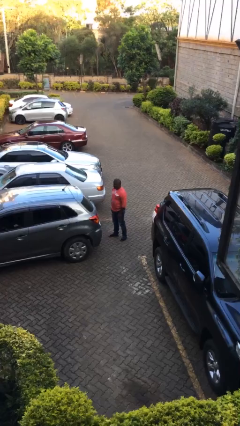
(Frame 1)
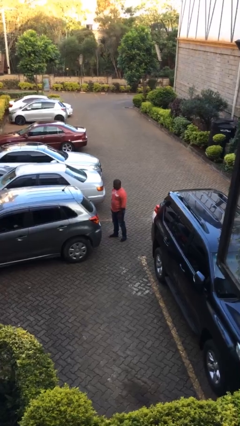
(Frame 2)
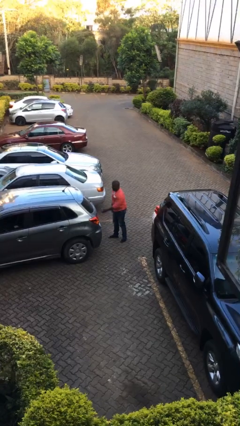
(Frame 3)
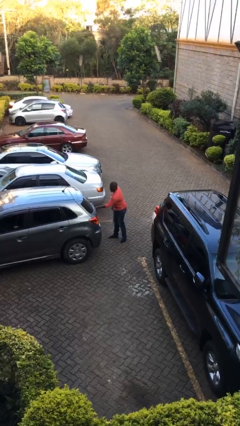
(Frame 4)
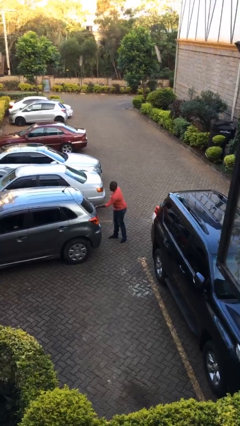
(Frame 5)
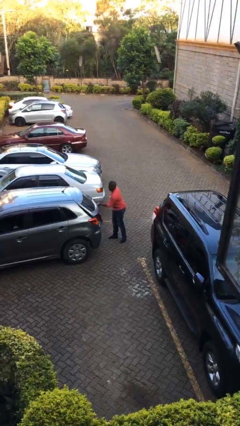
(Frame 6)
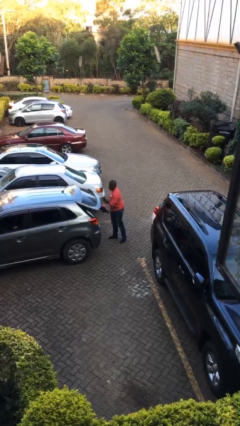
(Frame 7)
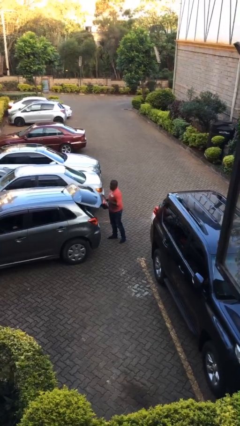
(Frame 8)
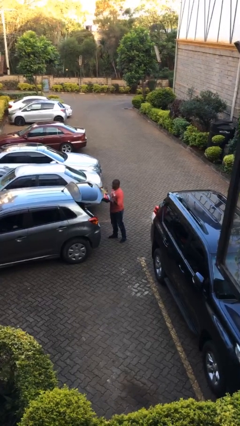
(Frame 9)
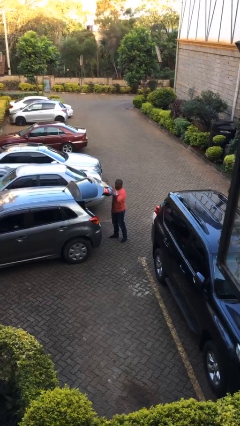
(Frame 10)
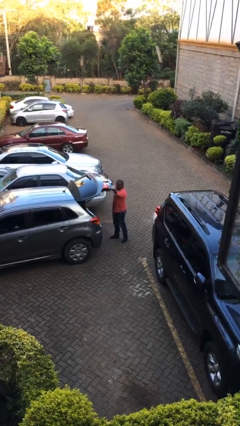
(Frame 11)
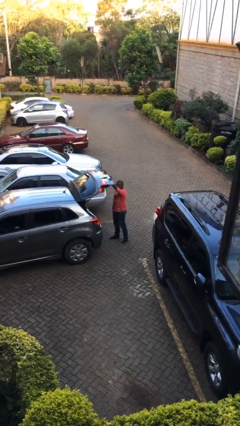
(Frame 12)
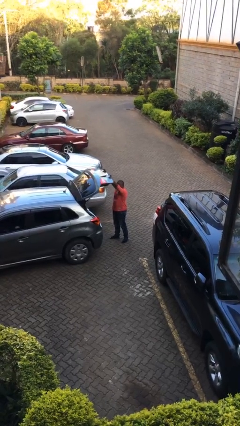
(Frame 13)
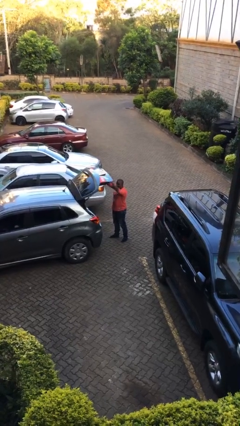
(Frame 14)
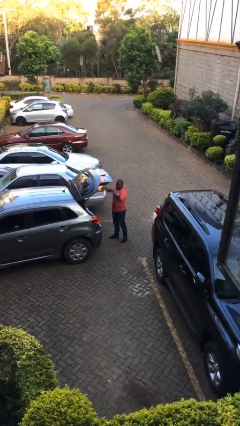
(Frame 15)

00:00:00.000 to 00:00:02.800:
person opens car trunk

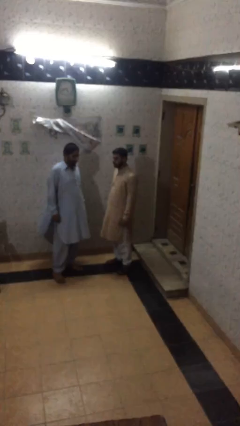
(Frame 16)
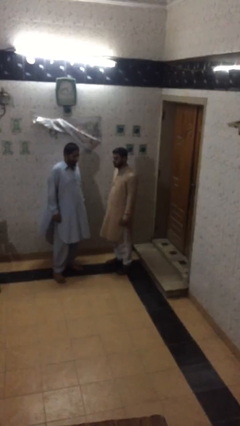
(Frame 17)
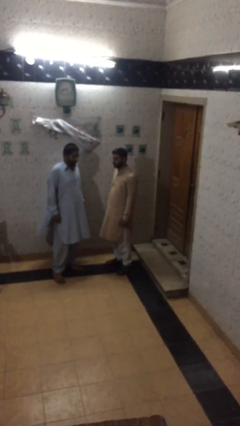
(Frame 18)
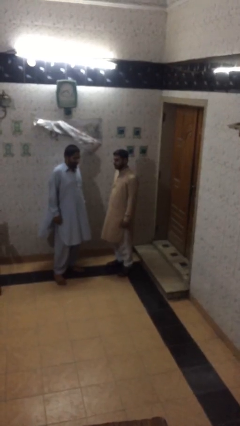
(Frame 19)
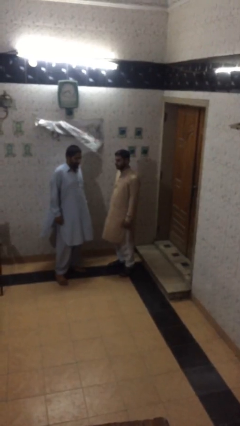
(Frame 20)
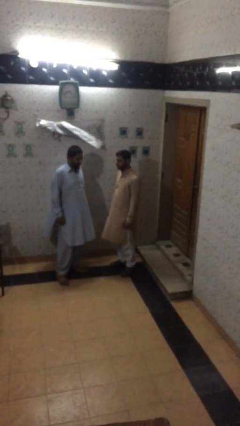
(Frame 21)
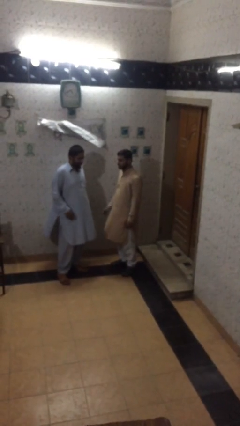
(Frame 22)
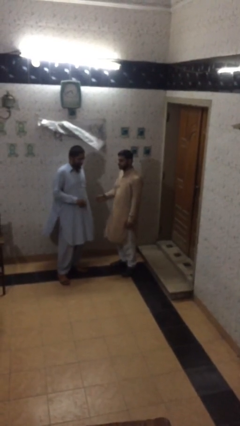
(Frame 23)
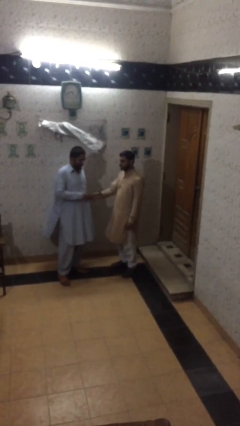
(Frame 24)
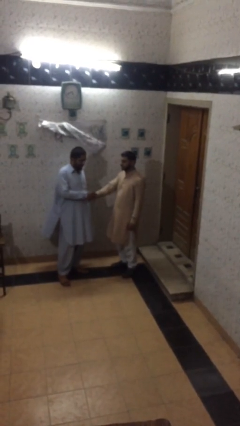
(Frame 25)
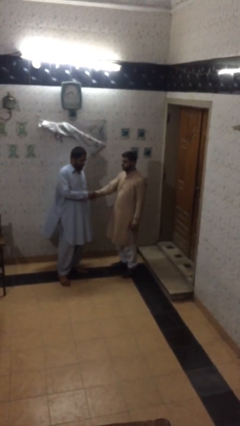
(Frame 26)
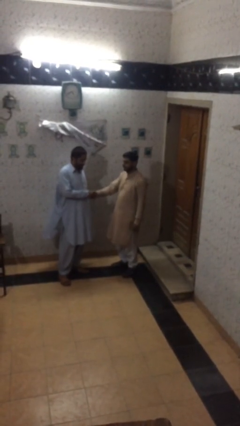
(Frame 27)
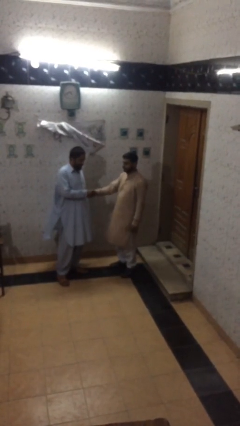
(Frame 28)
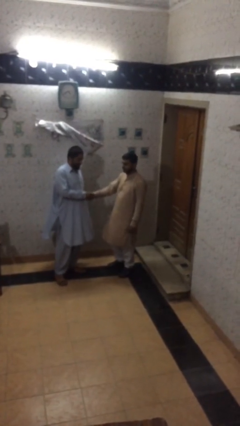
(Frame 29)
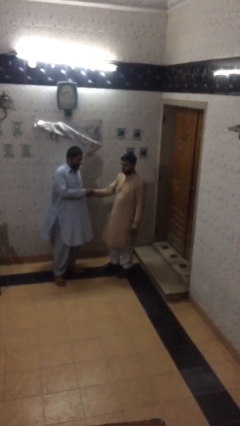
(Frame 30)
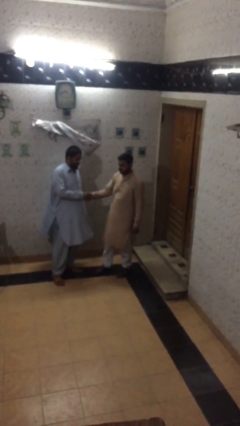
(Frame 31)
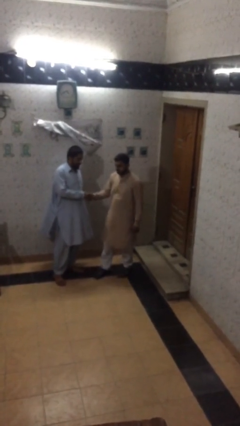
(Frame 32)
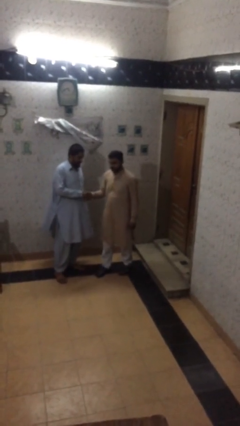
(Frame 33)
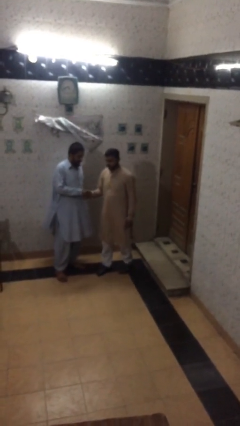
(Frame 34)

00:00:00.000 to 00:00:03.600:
person shakes hand

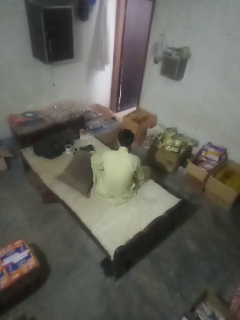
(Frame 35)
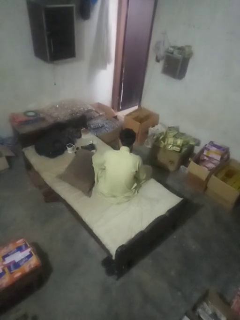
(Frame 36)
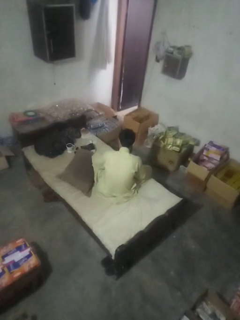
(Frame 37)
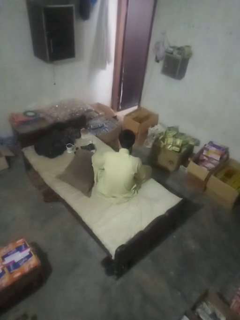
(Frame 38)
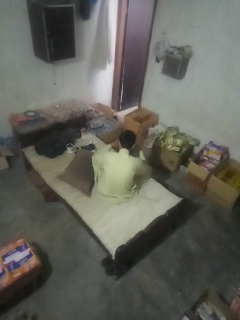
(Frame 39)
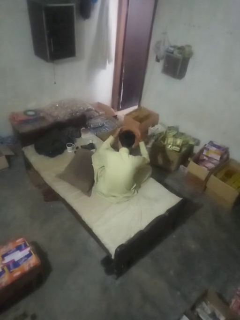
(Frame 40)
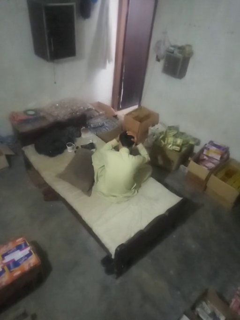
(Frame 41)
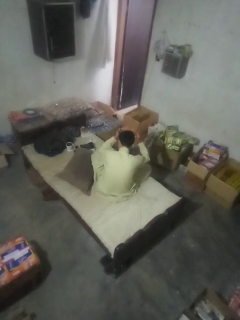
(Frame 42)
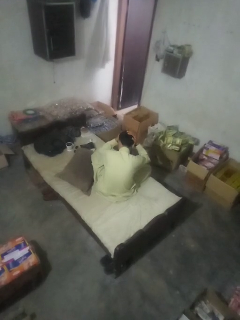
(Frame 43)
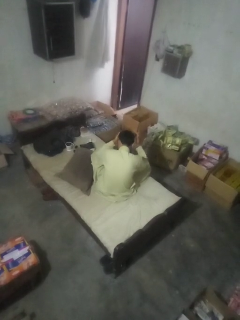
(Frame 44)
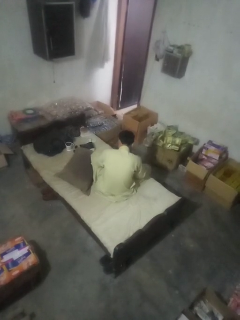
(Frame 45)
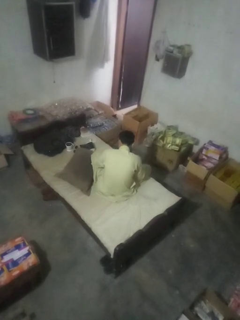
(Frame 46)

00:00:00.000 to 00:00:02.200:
person pats head

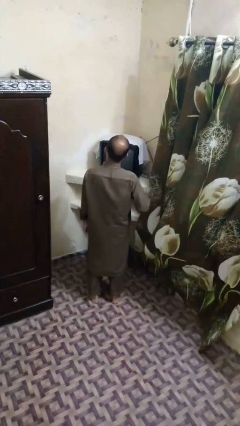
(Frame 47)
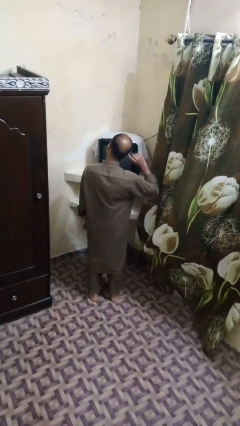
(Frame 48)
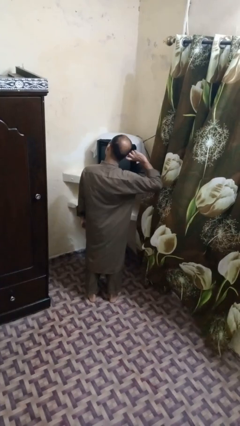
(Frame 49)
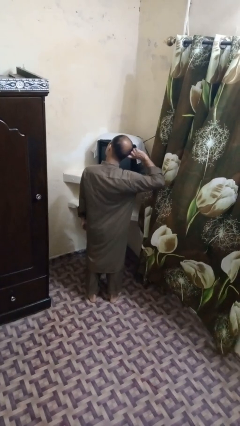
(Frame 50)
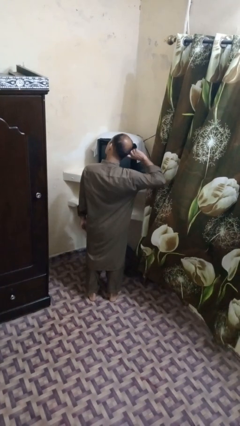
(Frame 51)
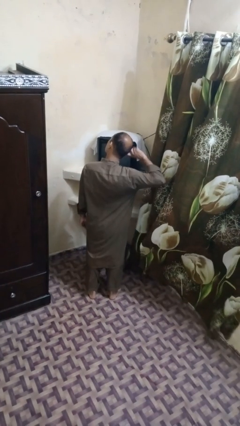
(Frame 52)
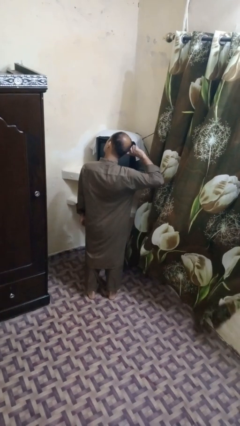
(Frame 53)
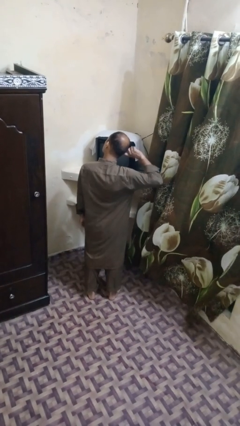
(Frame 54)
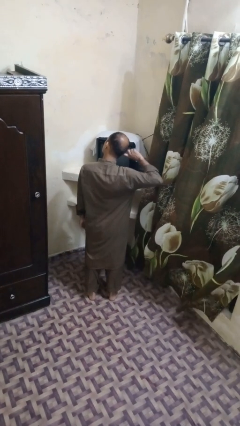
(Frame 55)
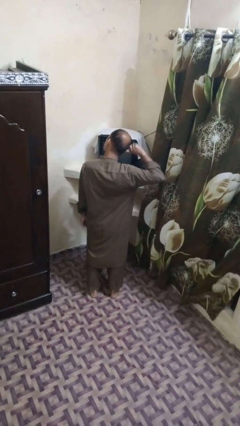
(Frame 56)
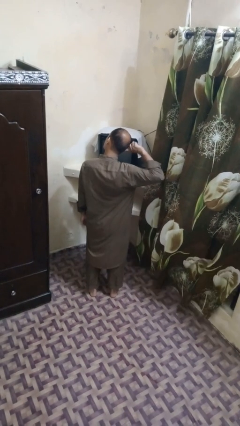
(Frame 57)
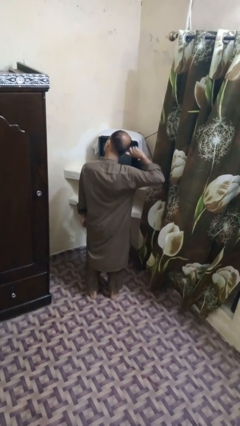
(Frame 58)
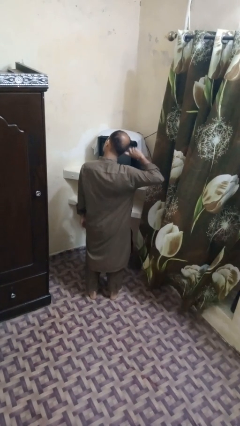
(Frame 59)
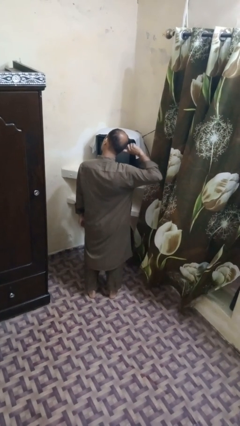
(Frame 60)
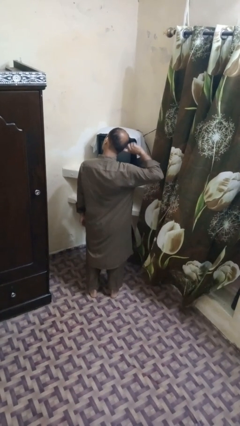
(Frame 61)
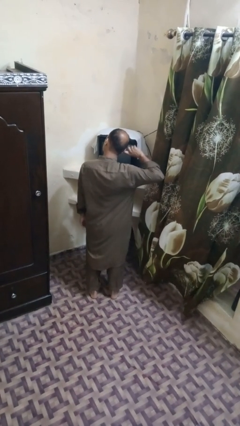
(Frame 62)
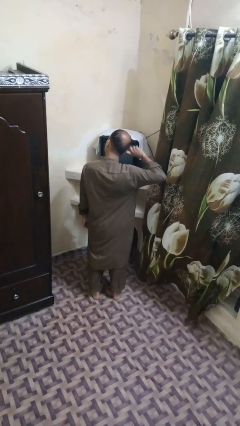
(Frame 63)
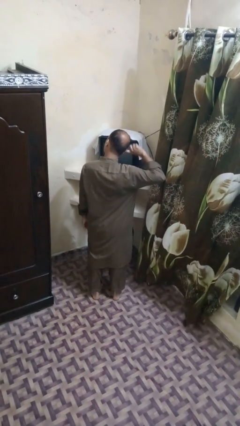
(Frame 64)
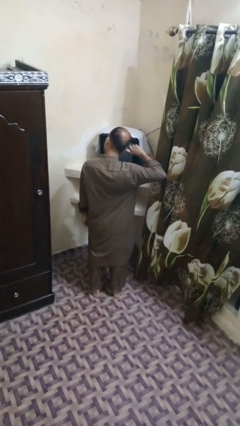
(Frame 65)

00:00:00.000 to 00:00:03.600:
person puts fingers in ear

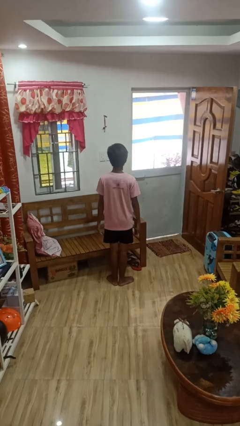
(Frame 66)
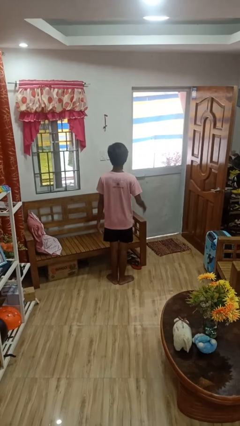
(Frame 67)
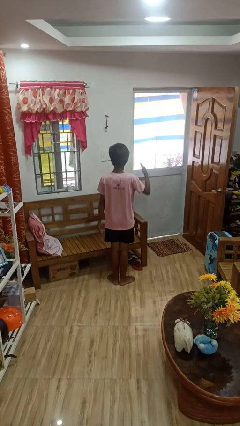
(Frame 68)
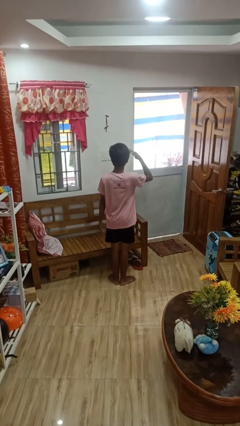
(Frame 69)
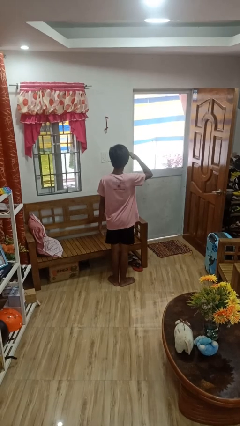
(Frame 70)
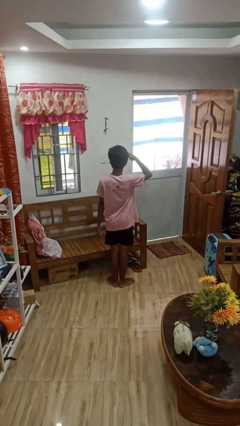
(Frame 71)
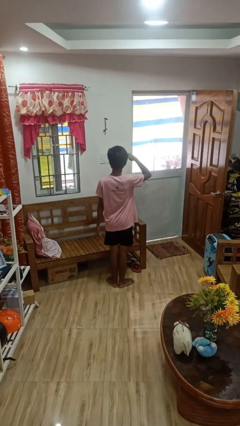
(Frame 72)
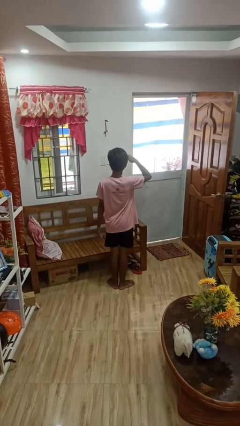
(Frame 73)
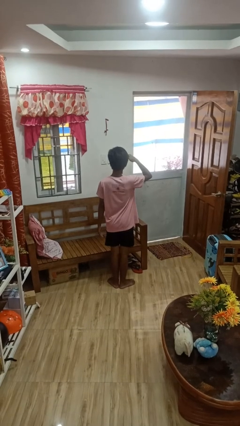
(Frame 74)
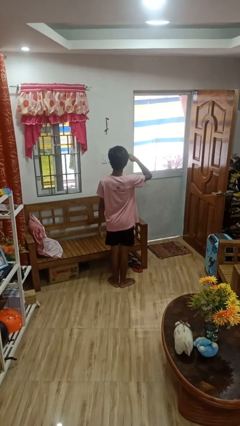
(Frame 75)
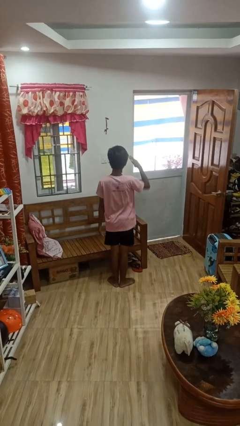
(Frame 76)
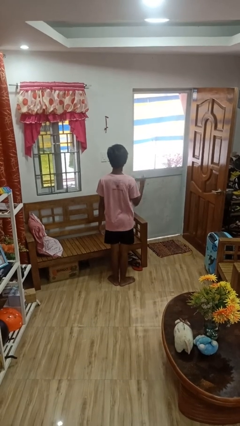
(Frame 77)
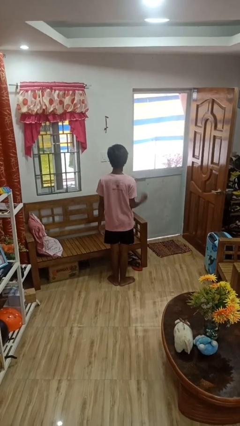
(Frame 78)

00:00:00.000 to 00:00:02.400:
person salutes

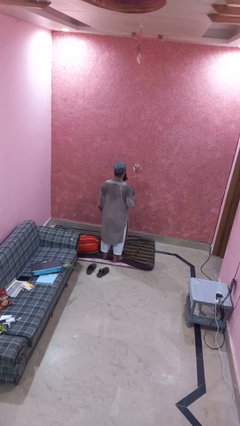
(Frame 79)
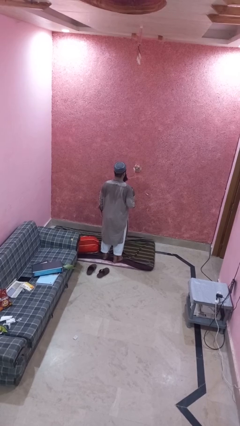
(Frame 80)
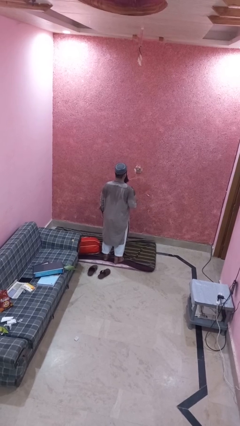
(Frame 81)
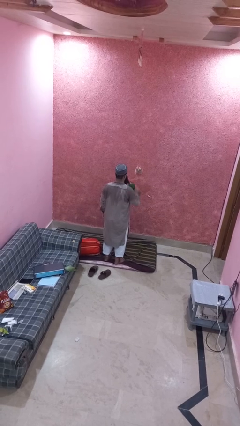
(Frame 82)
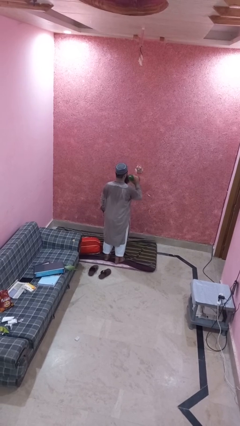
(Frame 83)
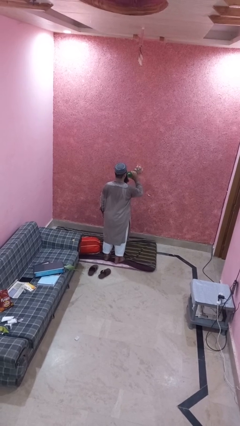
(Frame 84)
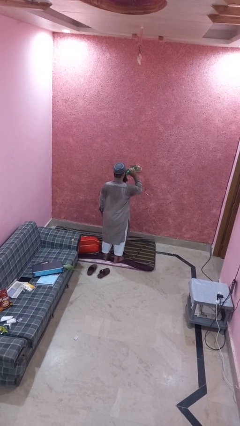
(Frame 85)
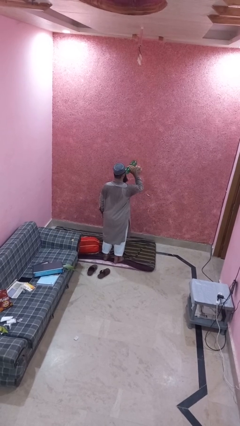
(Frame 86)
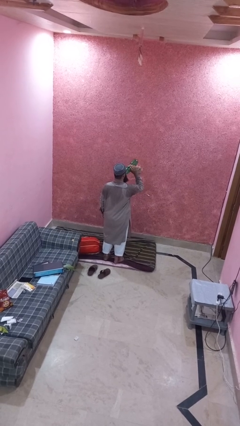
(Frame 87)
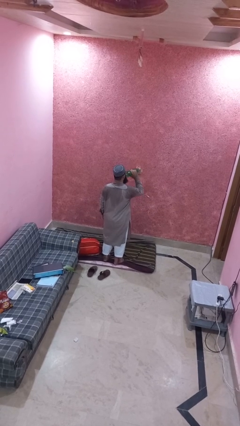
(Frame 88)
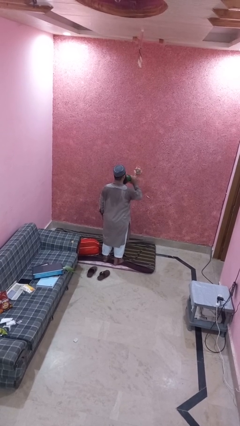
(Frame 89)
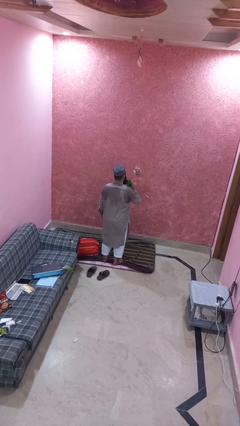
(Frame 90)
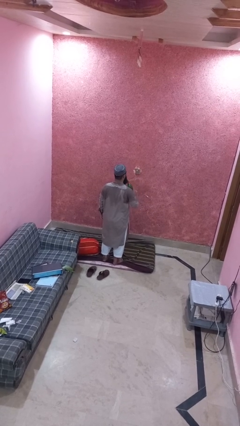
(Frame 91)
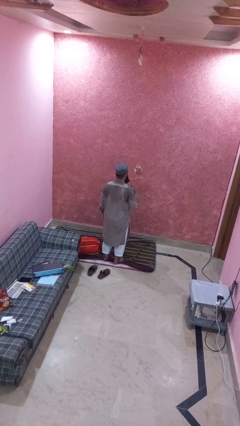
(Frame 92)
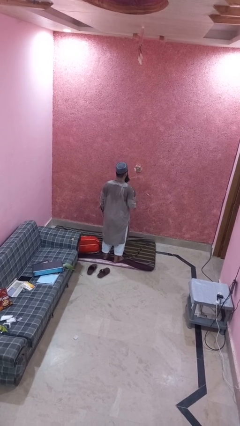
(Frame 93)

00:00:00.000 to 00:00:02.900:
person drinks from bottle

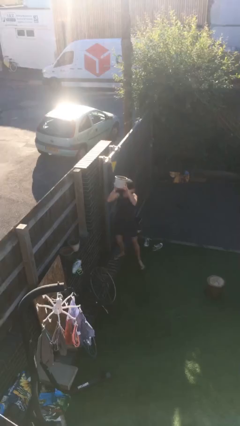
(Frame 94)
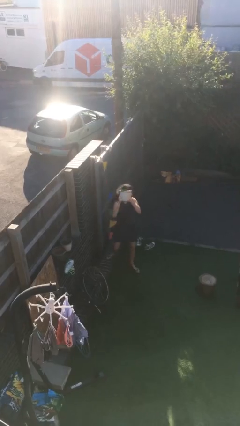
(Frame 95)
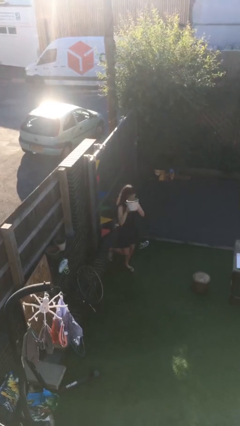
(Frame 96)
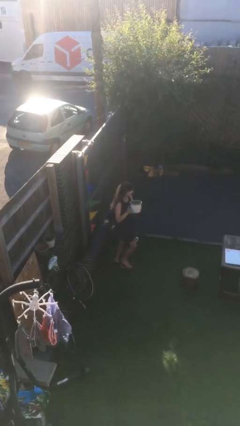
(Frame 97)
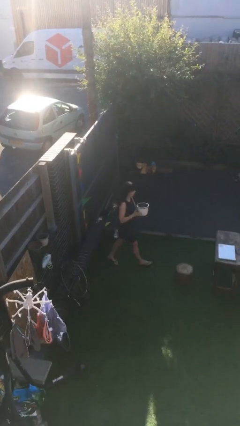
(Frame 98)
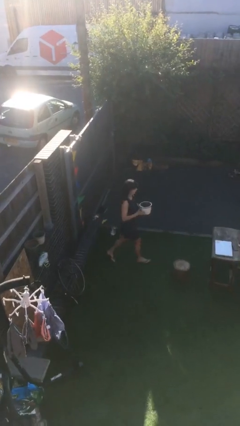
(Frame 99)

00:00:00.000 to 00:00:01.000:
person picks up object from shelf
